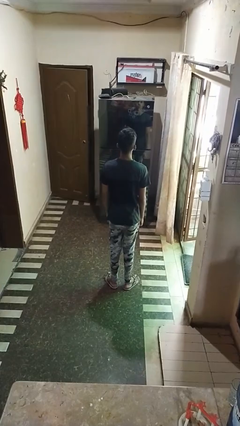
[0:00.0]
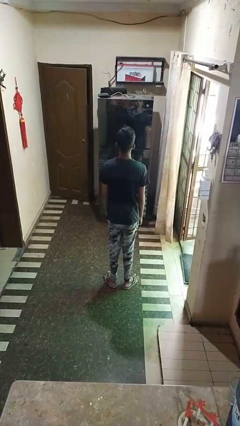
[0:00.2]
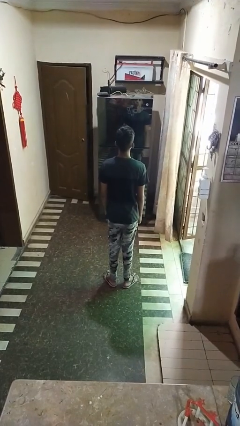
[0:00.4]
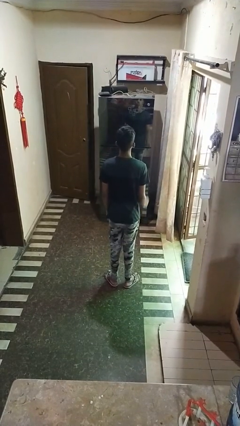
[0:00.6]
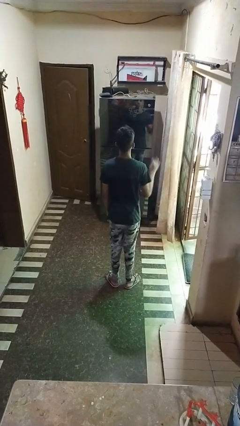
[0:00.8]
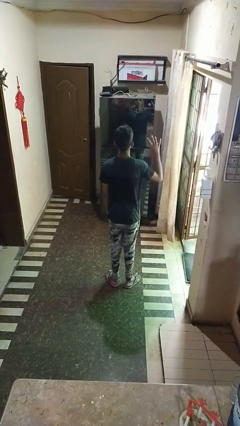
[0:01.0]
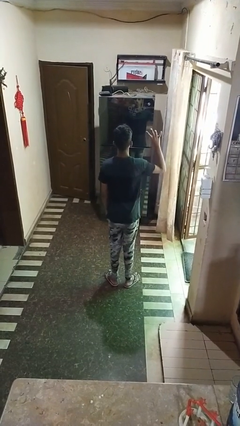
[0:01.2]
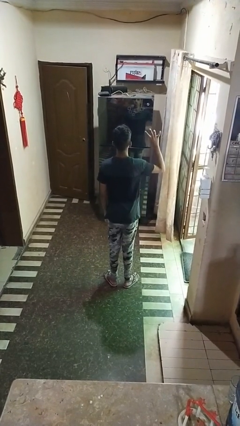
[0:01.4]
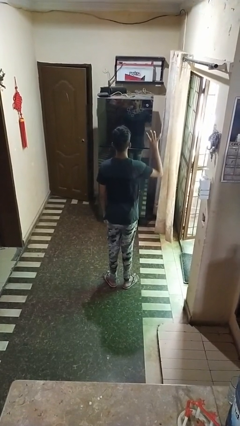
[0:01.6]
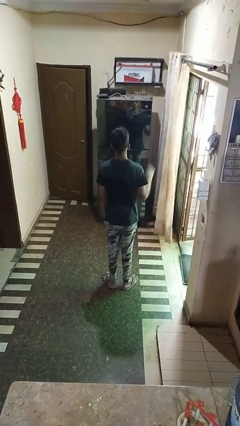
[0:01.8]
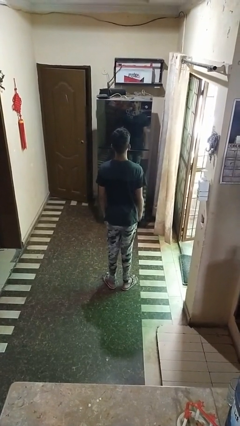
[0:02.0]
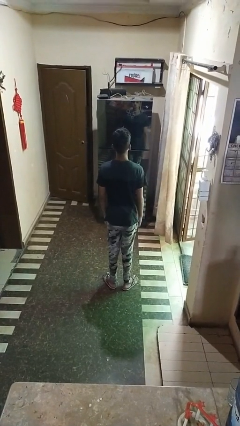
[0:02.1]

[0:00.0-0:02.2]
person gestures number four

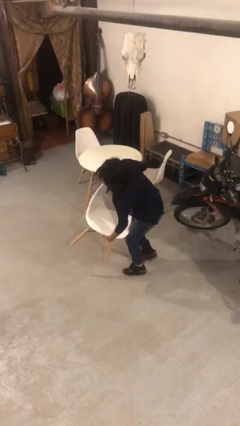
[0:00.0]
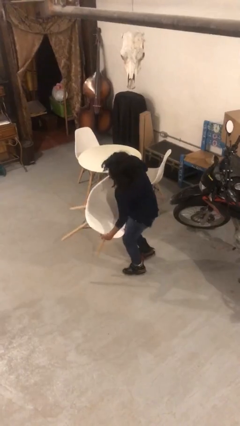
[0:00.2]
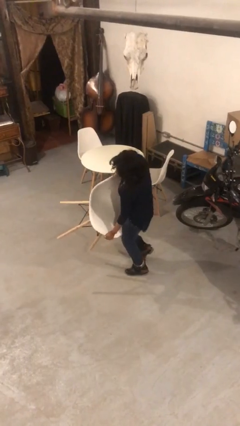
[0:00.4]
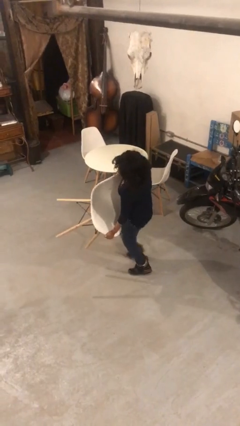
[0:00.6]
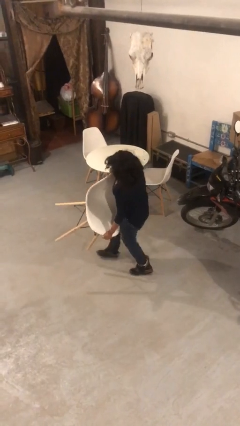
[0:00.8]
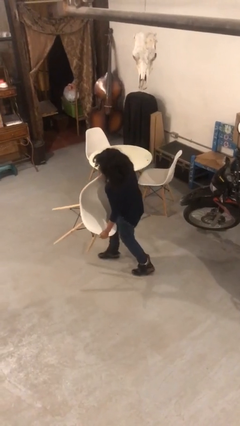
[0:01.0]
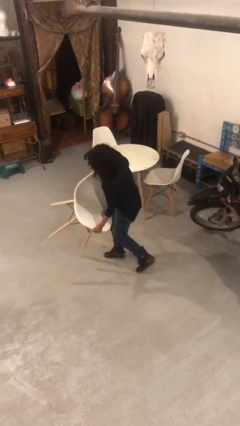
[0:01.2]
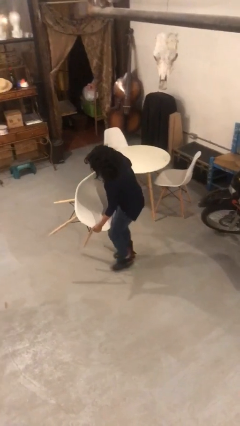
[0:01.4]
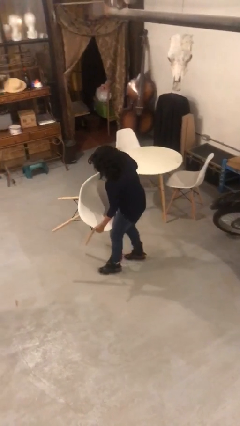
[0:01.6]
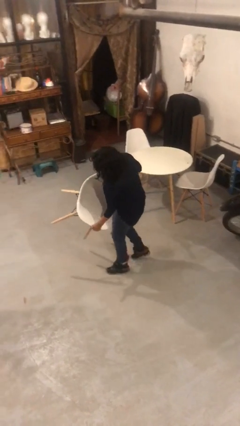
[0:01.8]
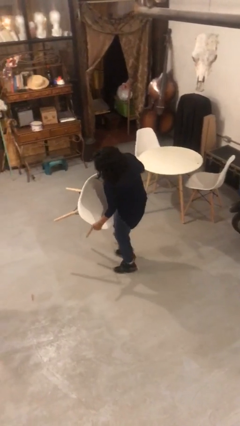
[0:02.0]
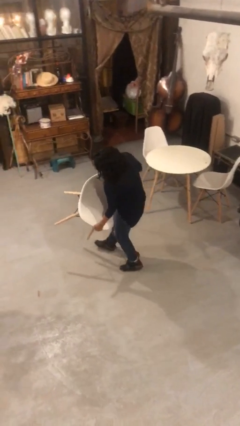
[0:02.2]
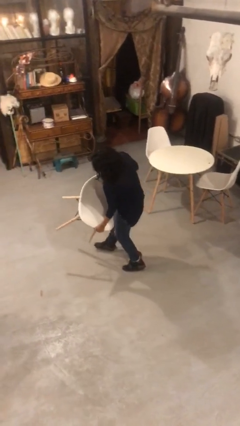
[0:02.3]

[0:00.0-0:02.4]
person carries heavy object

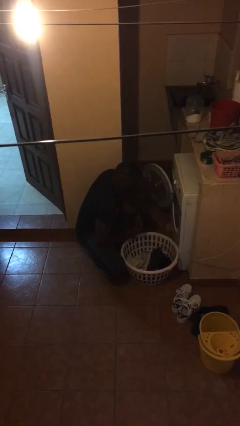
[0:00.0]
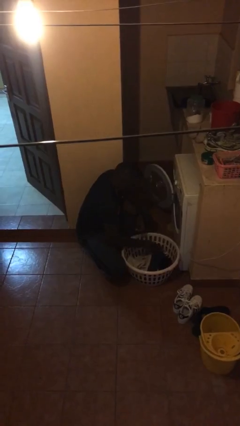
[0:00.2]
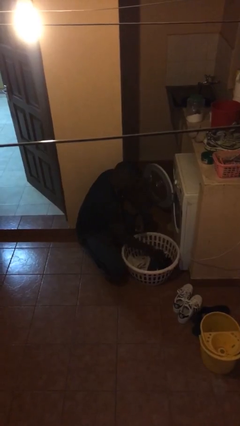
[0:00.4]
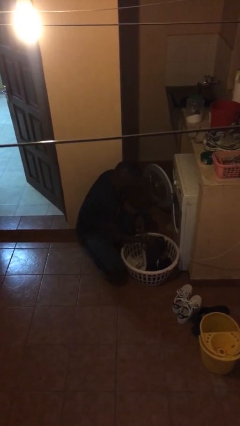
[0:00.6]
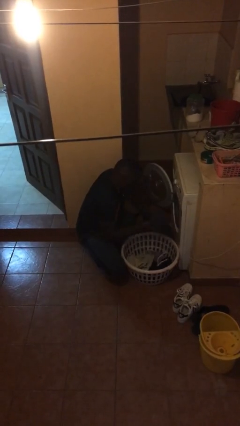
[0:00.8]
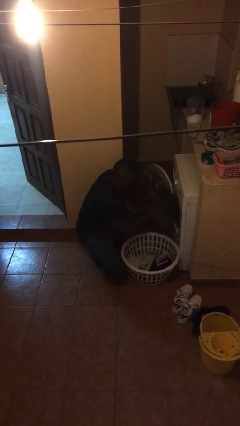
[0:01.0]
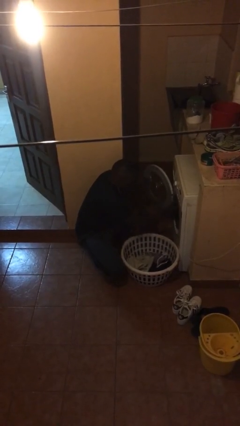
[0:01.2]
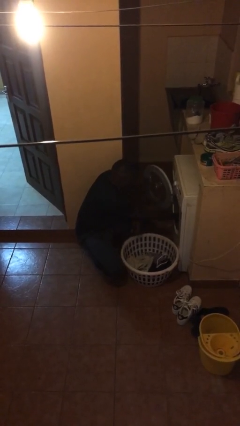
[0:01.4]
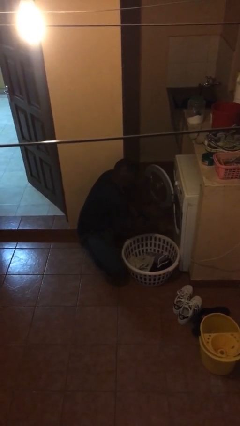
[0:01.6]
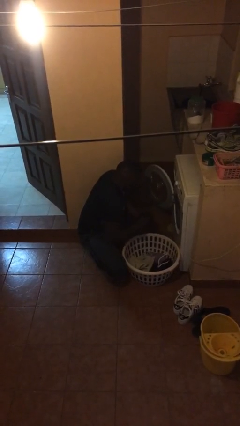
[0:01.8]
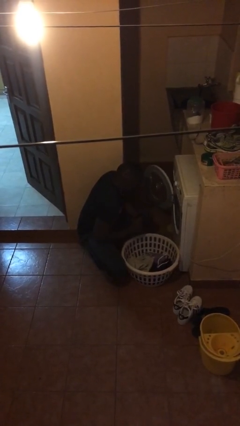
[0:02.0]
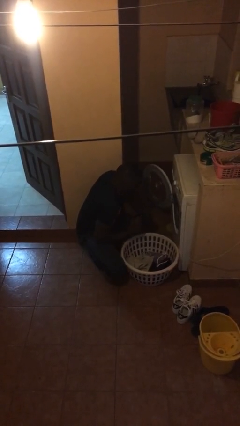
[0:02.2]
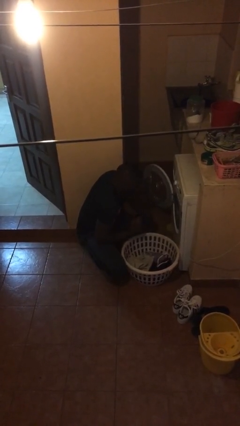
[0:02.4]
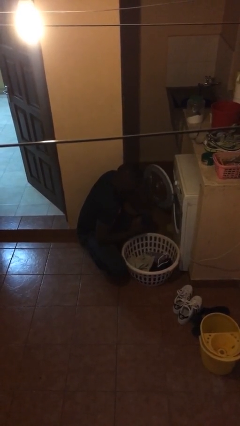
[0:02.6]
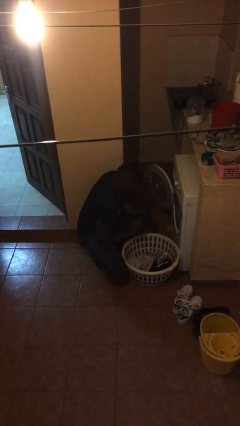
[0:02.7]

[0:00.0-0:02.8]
person loads clotheswasher

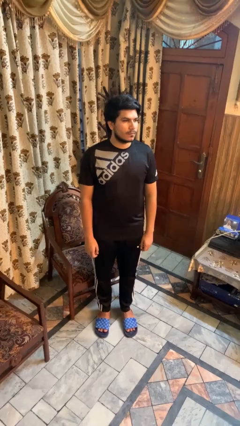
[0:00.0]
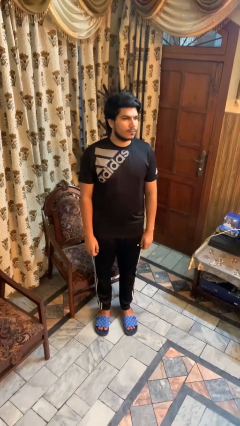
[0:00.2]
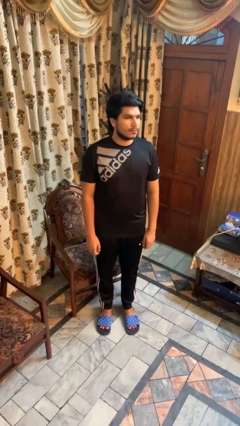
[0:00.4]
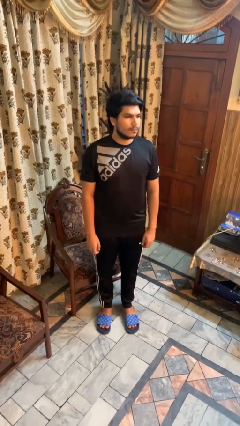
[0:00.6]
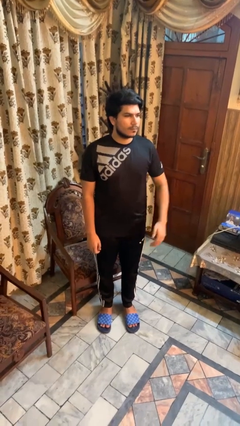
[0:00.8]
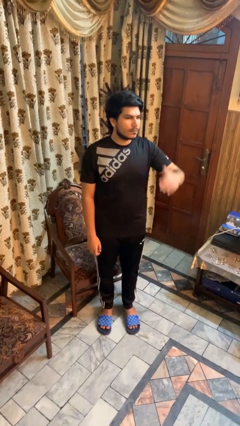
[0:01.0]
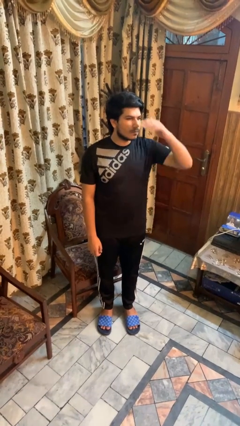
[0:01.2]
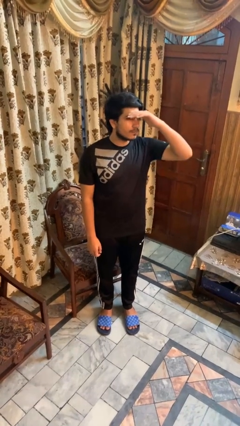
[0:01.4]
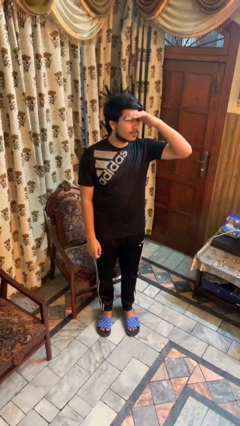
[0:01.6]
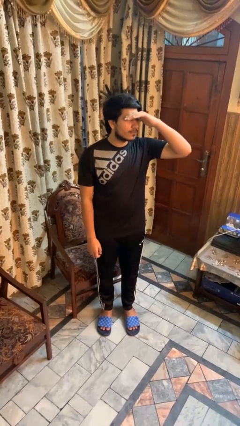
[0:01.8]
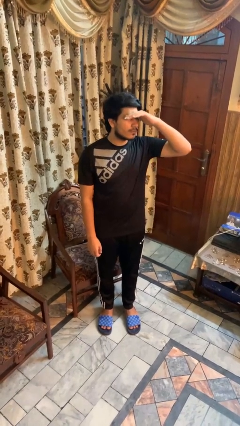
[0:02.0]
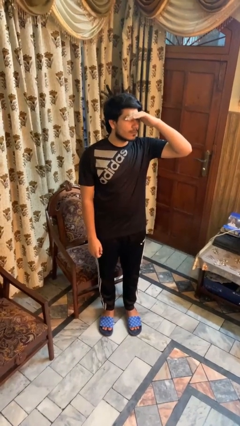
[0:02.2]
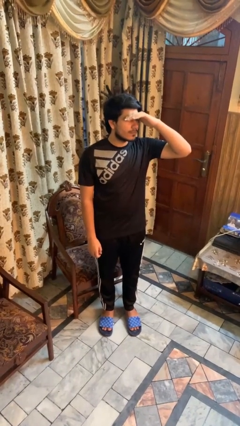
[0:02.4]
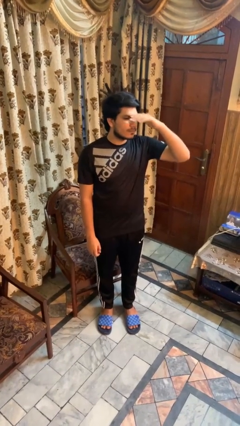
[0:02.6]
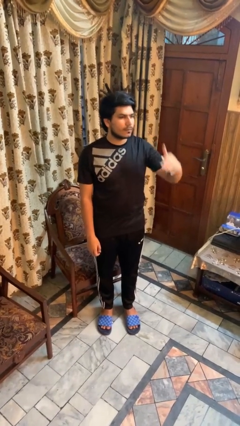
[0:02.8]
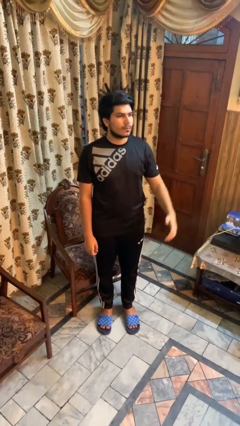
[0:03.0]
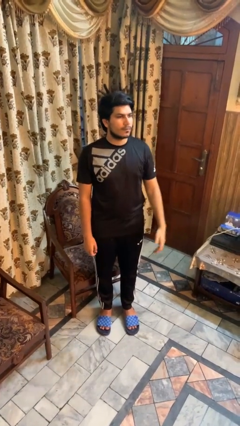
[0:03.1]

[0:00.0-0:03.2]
person shades eyes

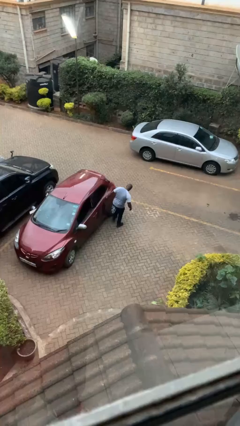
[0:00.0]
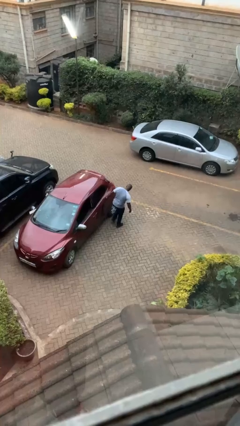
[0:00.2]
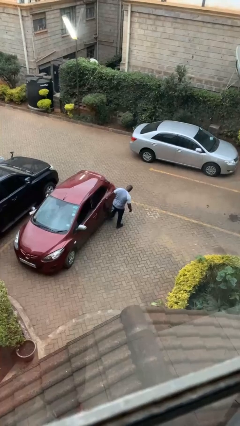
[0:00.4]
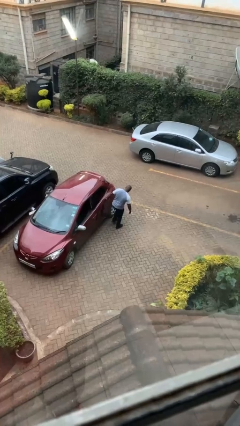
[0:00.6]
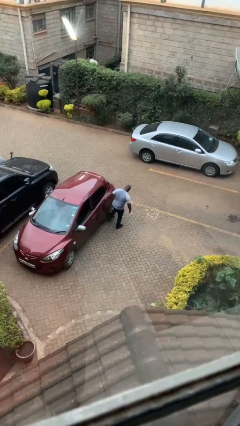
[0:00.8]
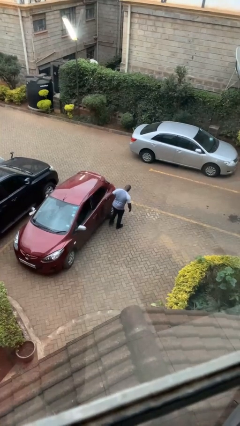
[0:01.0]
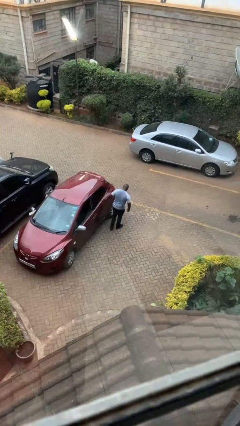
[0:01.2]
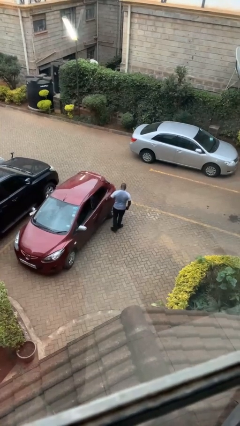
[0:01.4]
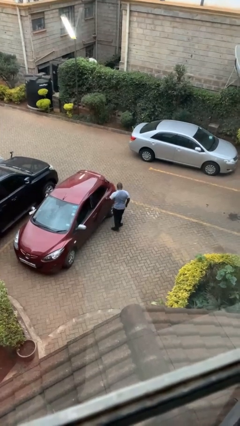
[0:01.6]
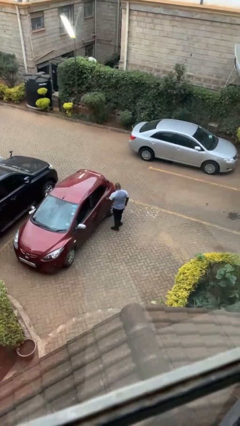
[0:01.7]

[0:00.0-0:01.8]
person kicks car tires

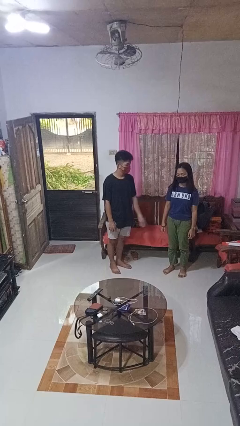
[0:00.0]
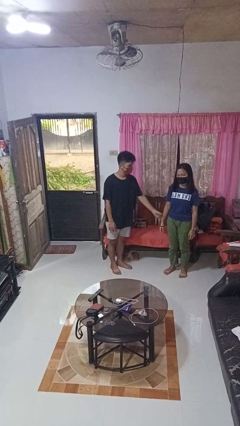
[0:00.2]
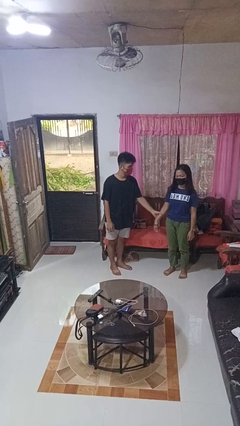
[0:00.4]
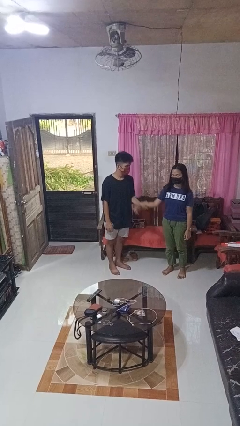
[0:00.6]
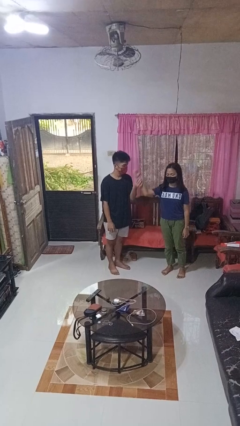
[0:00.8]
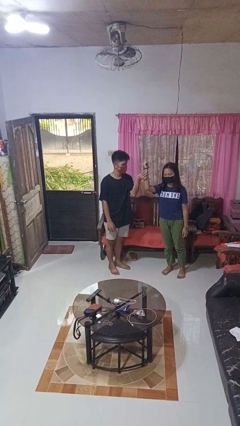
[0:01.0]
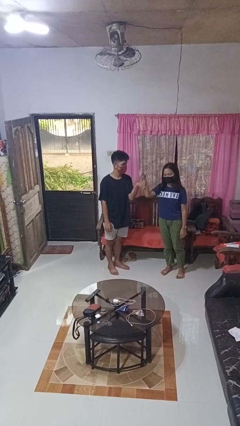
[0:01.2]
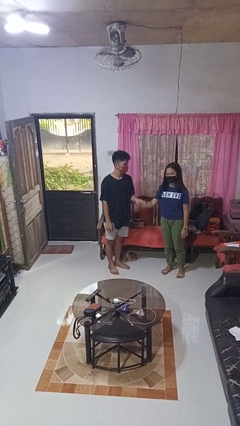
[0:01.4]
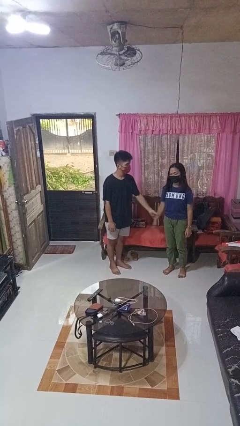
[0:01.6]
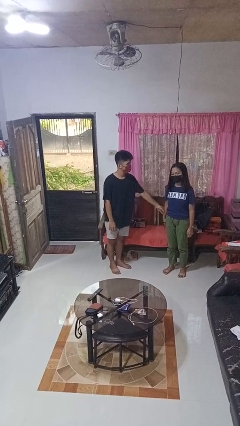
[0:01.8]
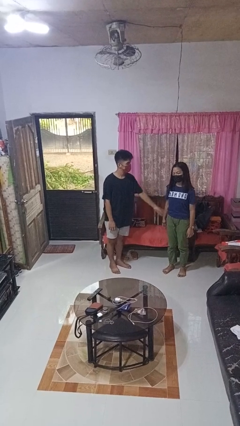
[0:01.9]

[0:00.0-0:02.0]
person grabs person by forearm

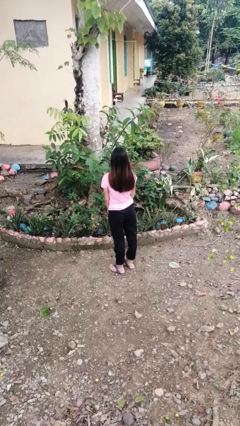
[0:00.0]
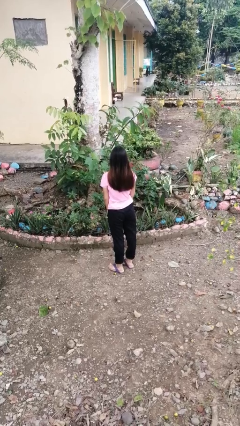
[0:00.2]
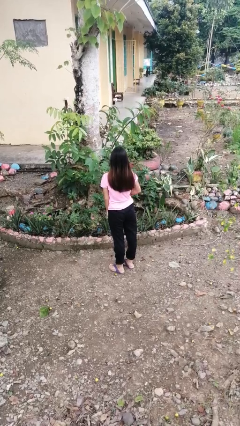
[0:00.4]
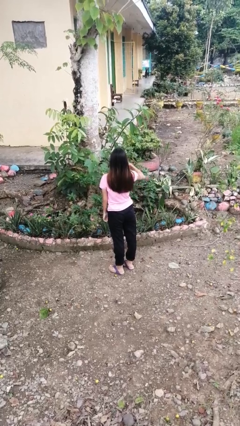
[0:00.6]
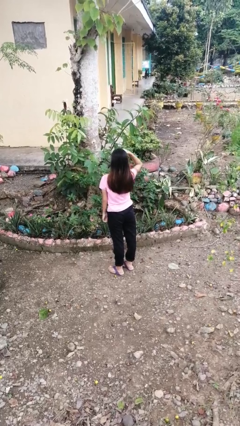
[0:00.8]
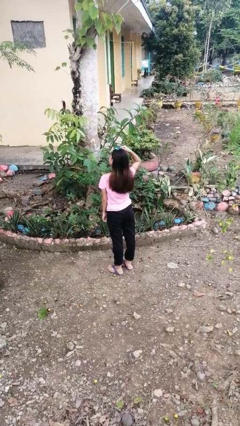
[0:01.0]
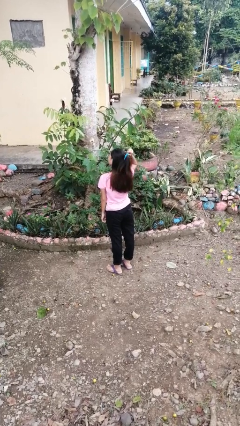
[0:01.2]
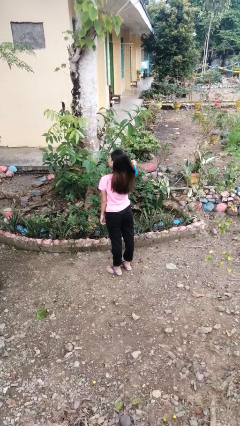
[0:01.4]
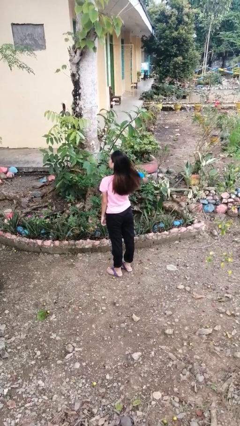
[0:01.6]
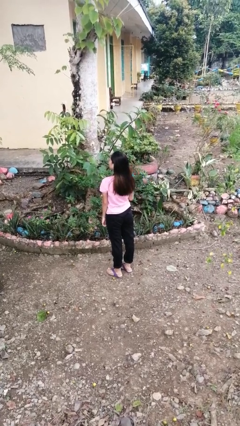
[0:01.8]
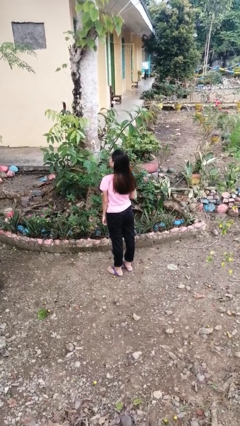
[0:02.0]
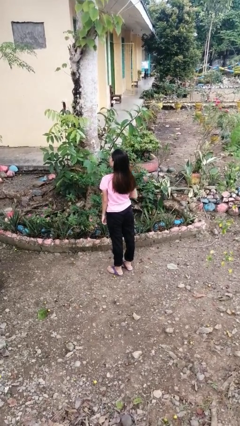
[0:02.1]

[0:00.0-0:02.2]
person brushes hair
